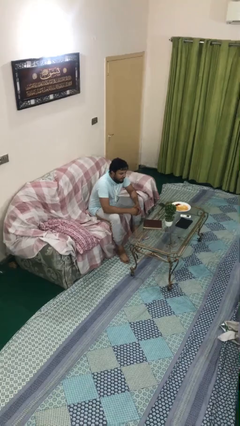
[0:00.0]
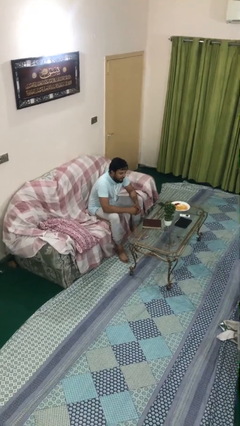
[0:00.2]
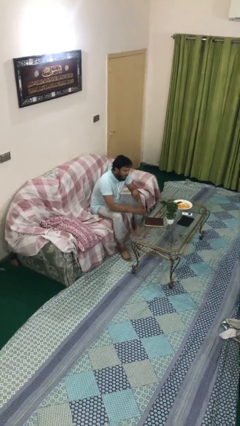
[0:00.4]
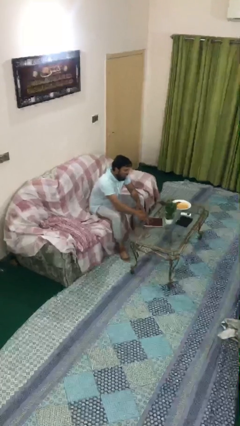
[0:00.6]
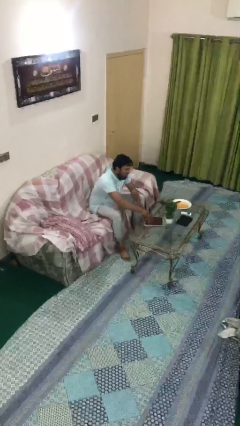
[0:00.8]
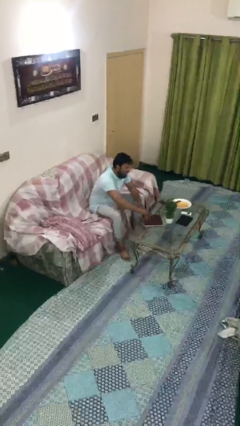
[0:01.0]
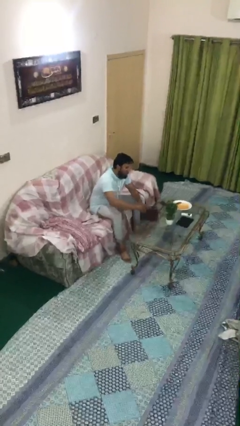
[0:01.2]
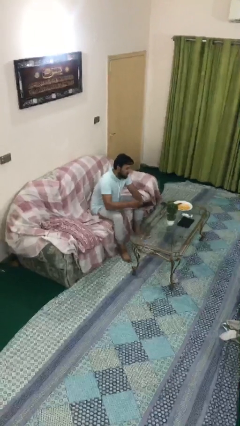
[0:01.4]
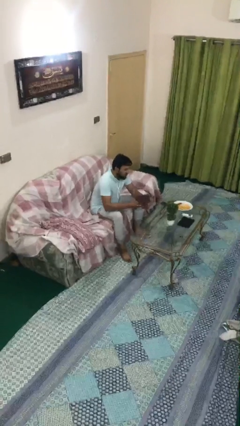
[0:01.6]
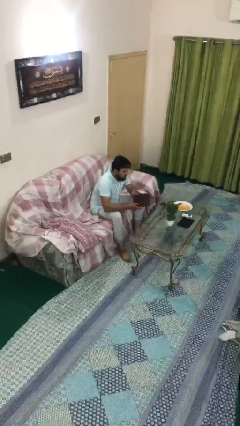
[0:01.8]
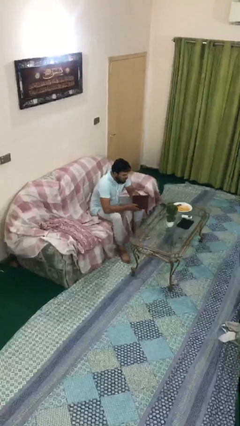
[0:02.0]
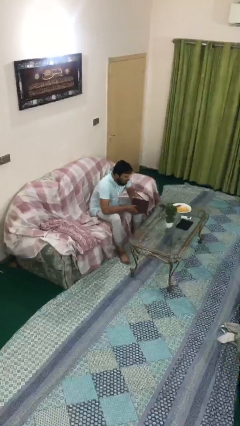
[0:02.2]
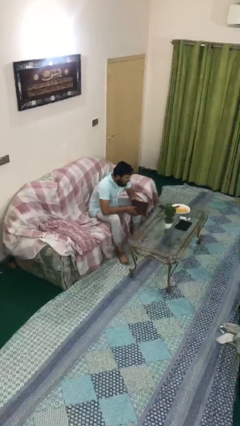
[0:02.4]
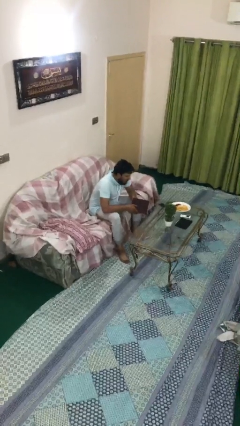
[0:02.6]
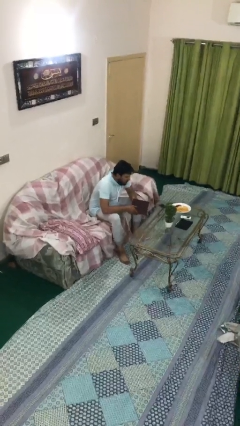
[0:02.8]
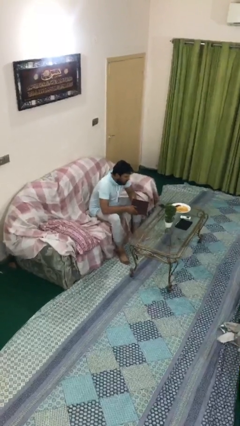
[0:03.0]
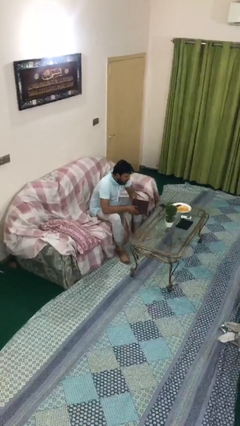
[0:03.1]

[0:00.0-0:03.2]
person picks up object from table

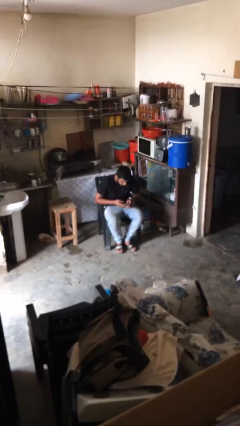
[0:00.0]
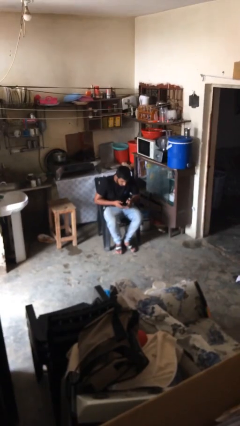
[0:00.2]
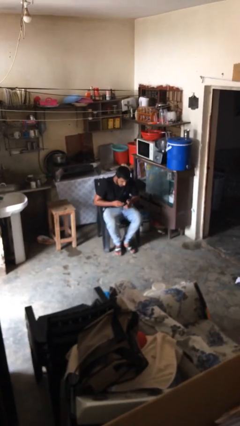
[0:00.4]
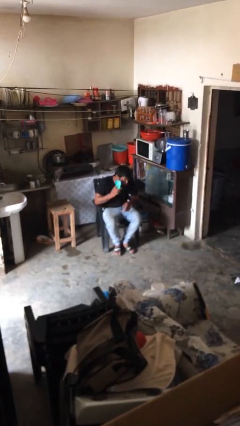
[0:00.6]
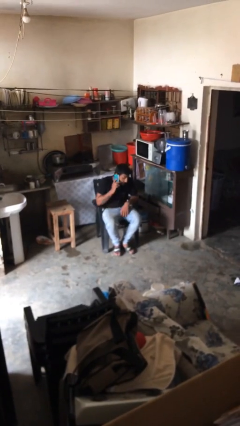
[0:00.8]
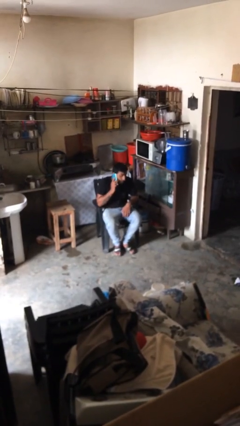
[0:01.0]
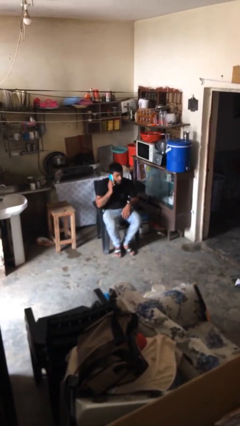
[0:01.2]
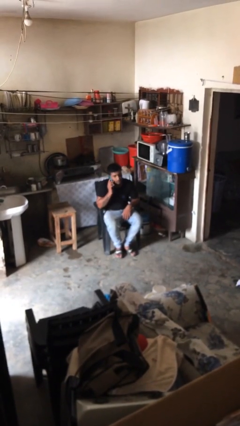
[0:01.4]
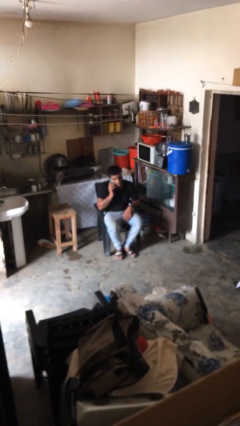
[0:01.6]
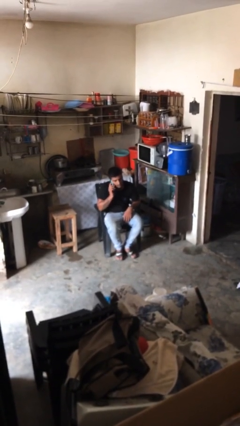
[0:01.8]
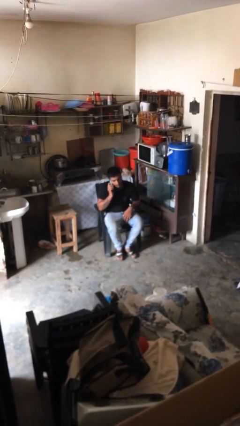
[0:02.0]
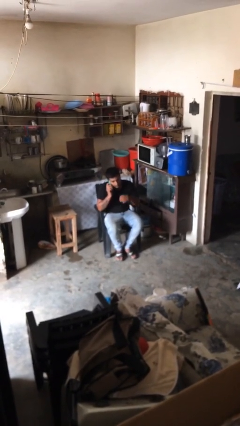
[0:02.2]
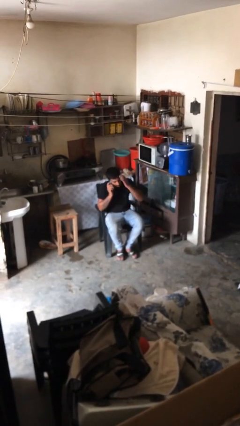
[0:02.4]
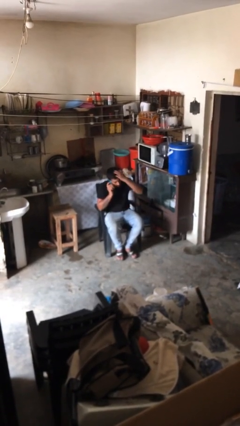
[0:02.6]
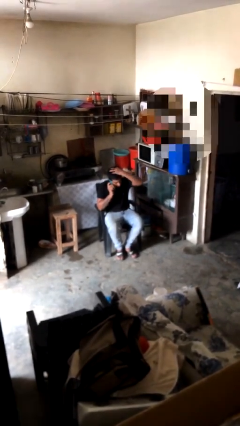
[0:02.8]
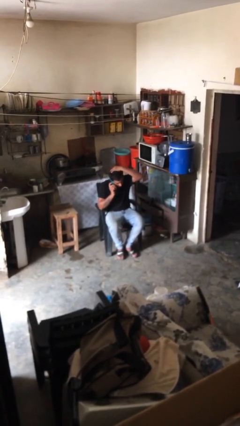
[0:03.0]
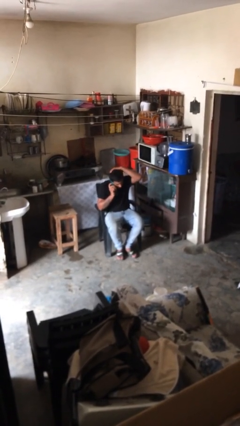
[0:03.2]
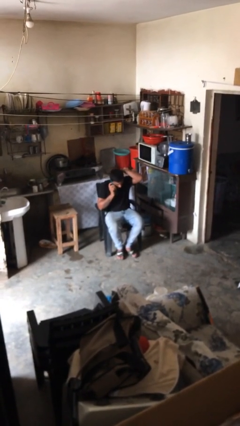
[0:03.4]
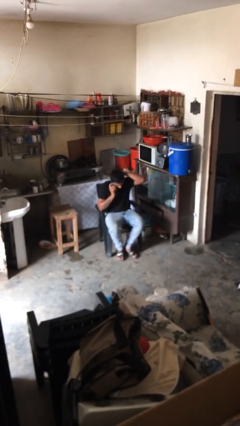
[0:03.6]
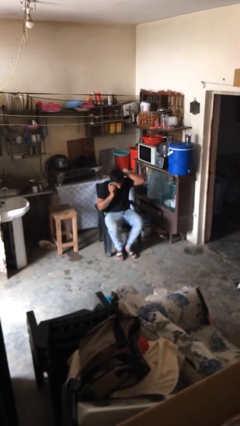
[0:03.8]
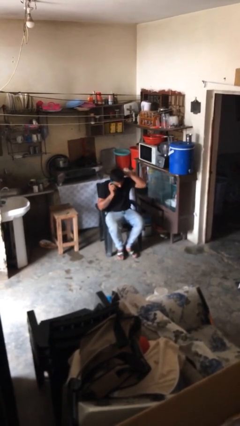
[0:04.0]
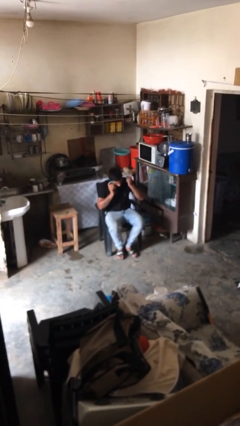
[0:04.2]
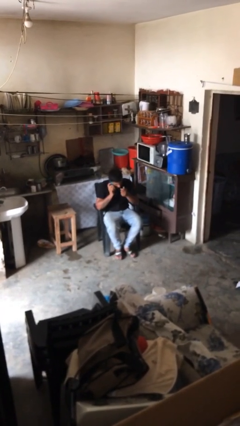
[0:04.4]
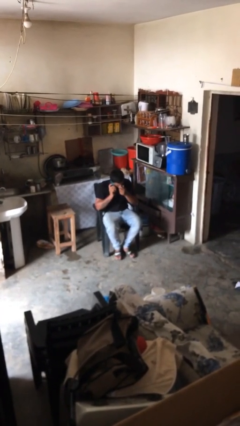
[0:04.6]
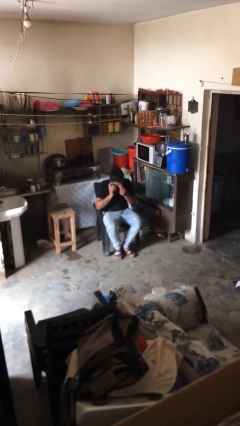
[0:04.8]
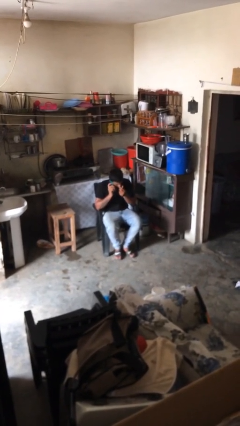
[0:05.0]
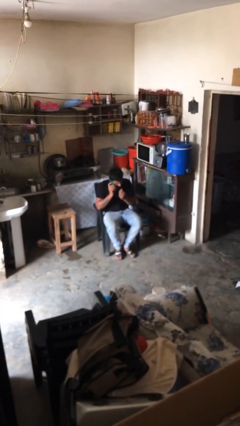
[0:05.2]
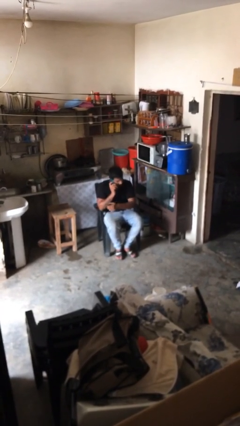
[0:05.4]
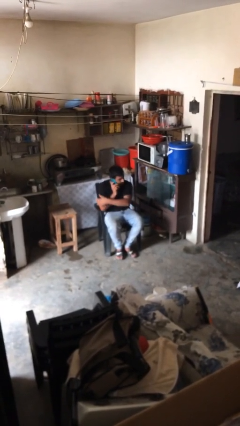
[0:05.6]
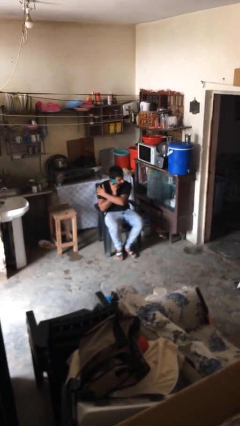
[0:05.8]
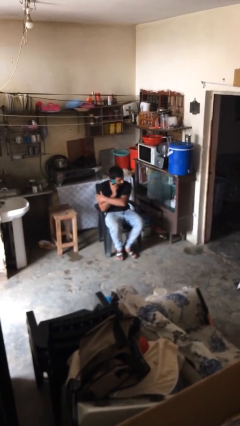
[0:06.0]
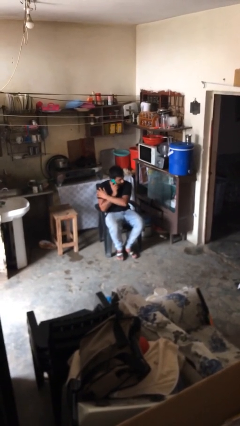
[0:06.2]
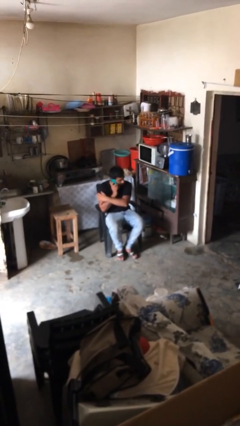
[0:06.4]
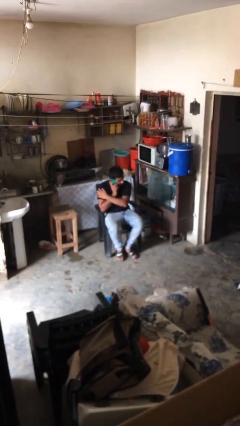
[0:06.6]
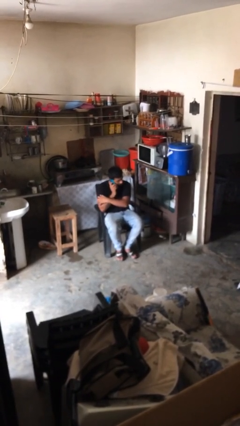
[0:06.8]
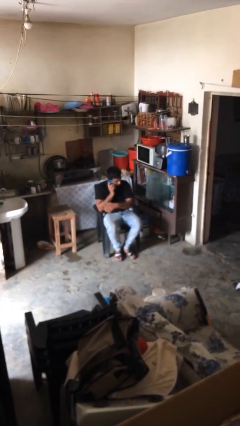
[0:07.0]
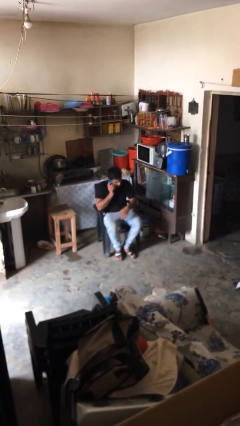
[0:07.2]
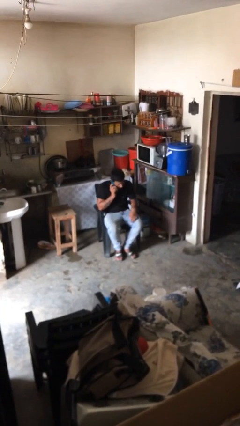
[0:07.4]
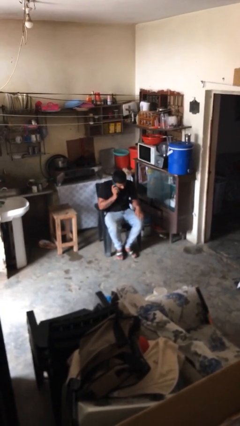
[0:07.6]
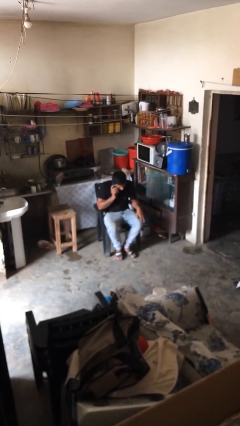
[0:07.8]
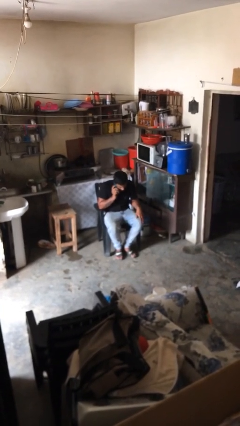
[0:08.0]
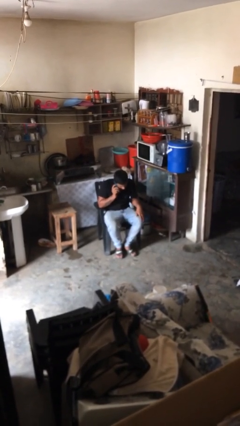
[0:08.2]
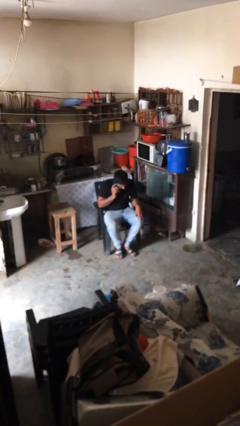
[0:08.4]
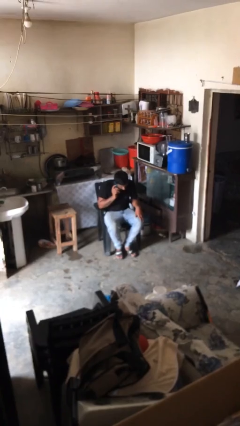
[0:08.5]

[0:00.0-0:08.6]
person talks on phone

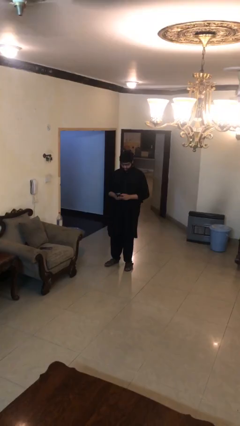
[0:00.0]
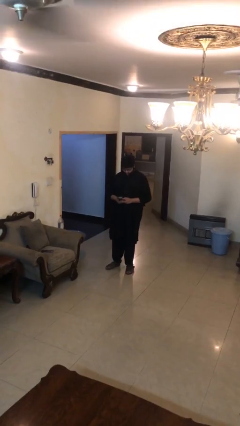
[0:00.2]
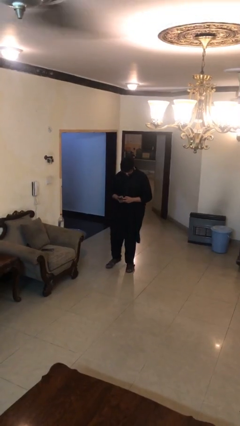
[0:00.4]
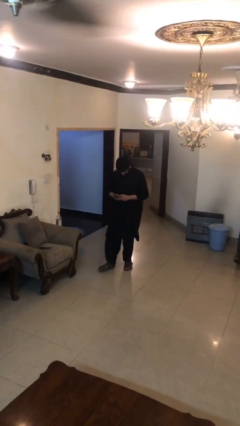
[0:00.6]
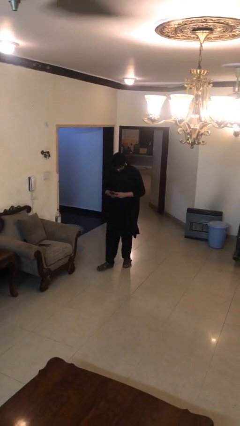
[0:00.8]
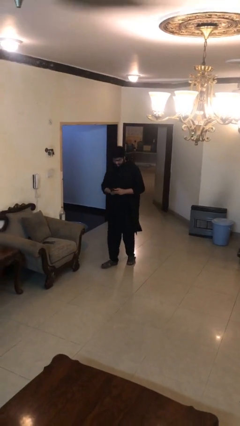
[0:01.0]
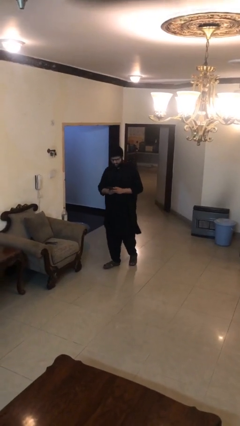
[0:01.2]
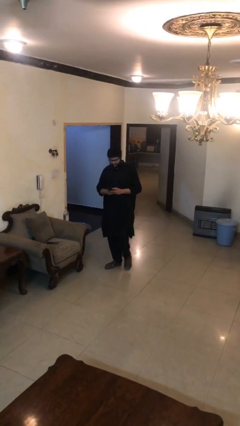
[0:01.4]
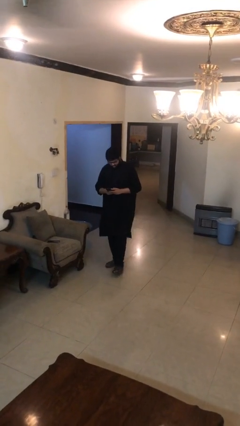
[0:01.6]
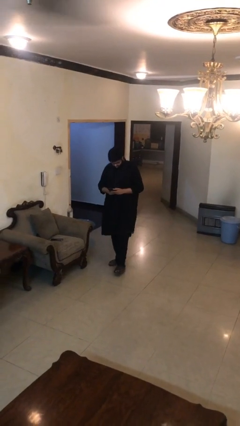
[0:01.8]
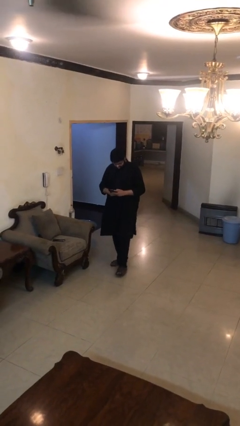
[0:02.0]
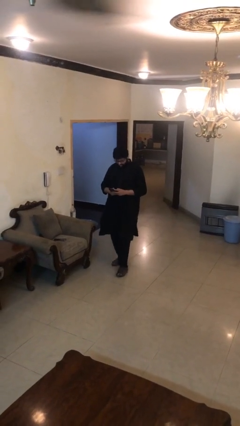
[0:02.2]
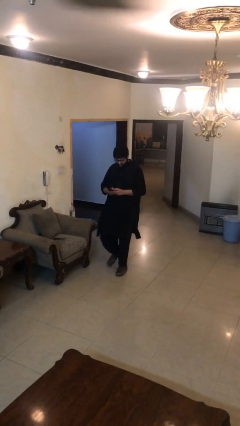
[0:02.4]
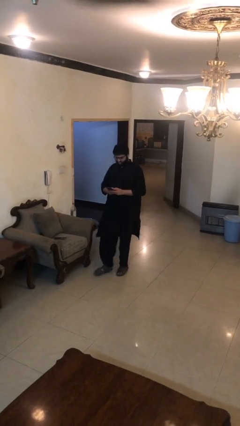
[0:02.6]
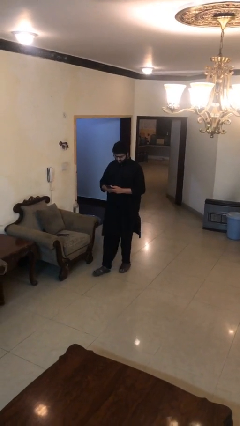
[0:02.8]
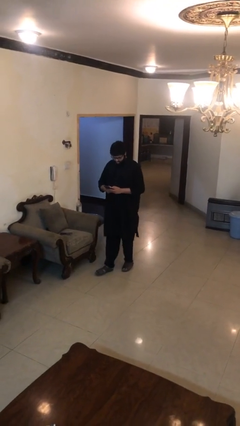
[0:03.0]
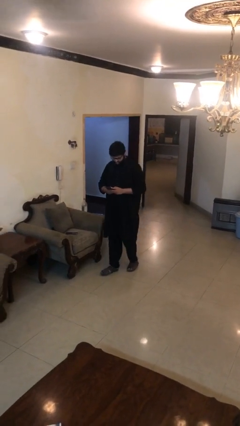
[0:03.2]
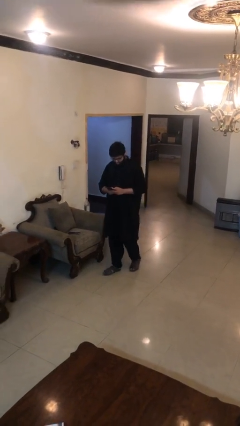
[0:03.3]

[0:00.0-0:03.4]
person texts on phone

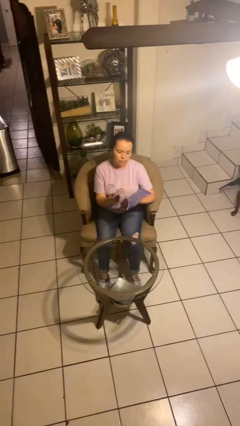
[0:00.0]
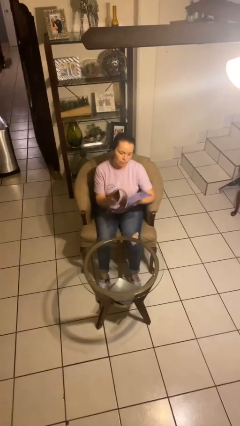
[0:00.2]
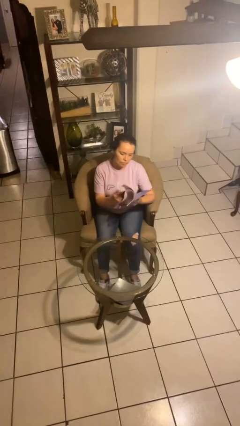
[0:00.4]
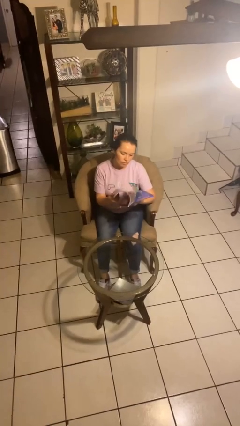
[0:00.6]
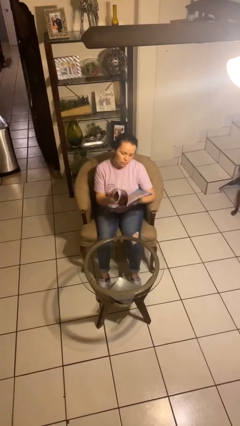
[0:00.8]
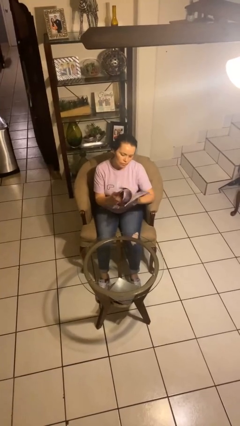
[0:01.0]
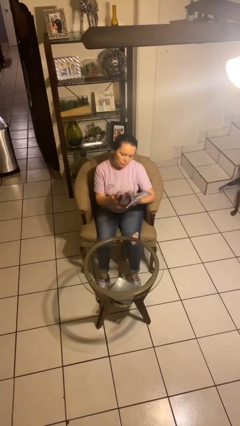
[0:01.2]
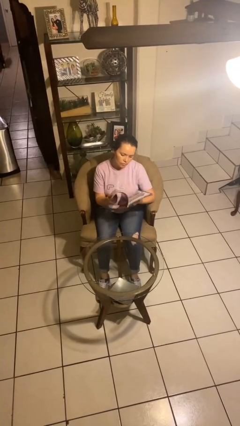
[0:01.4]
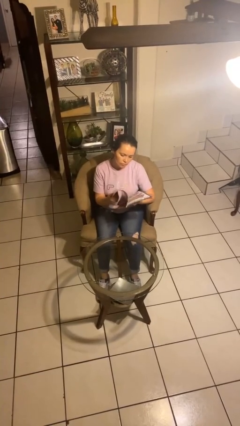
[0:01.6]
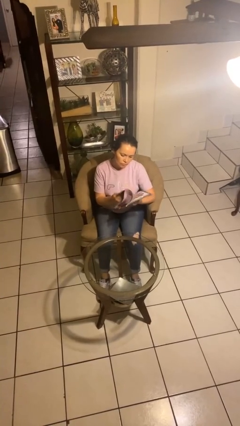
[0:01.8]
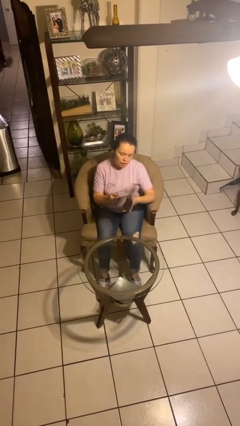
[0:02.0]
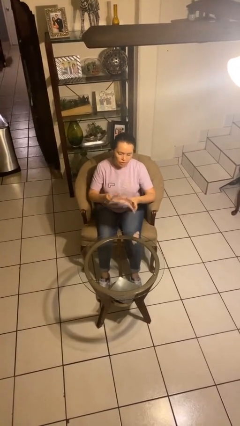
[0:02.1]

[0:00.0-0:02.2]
person reads magazine

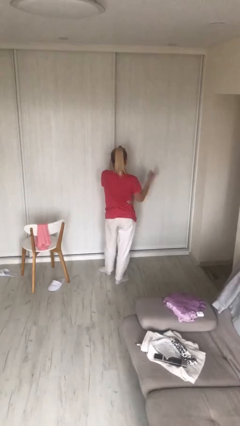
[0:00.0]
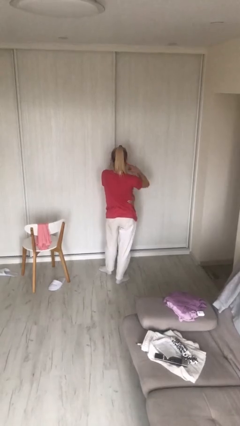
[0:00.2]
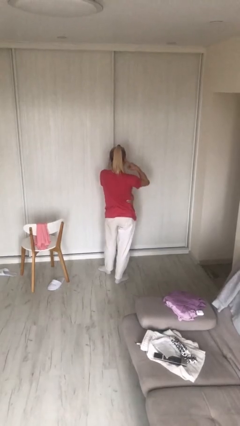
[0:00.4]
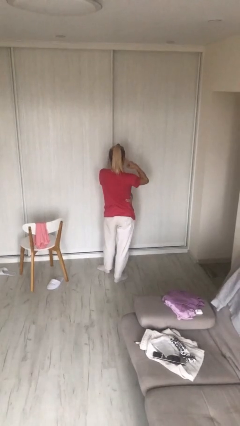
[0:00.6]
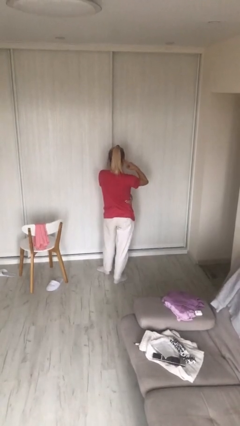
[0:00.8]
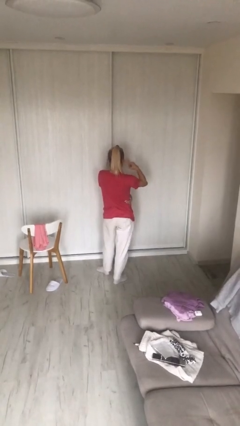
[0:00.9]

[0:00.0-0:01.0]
person gestures listen closely
